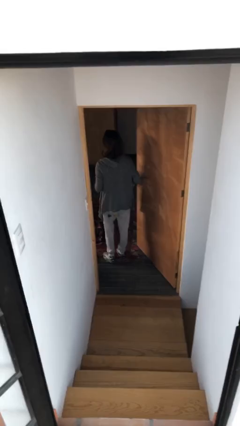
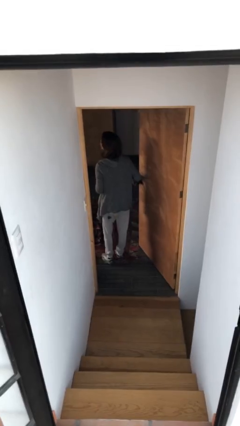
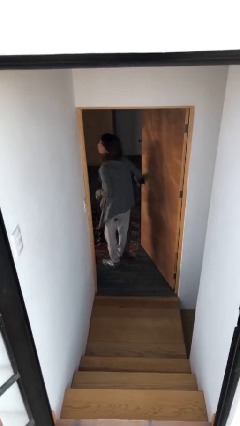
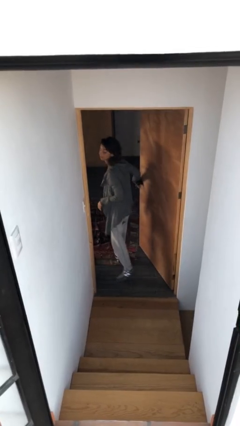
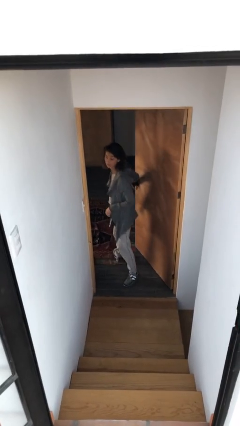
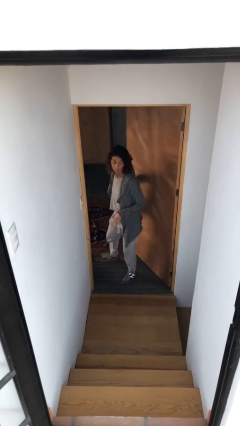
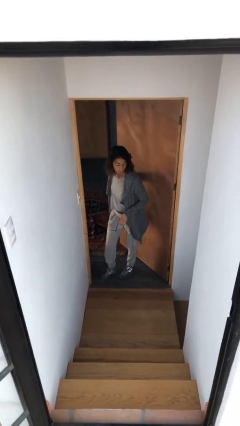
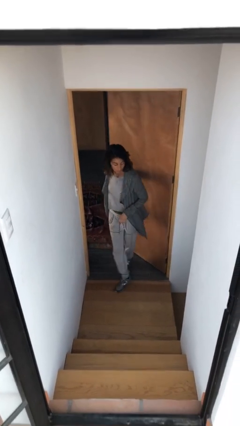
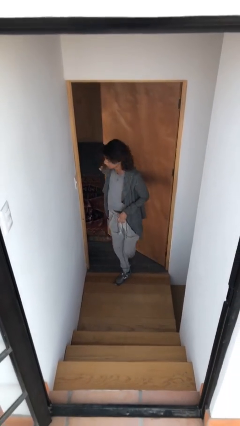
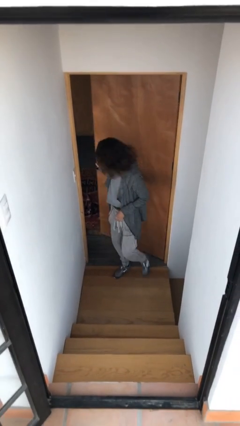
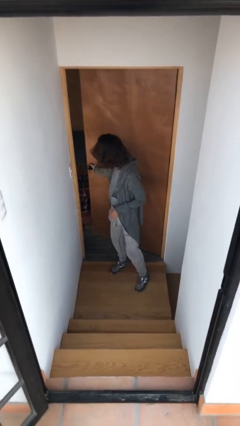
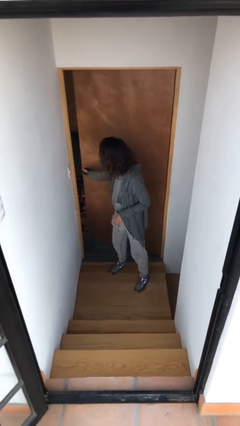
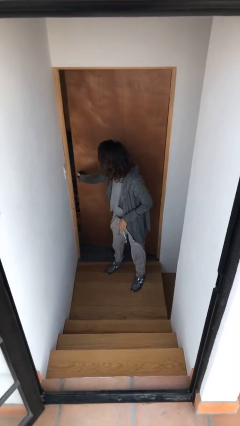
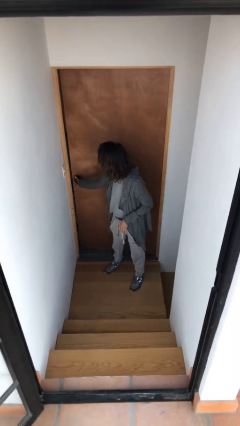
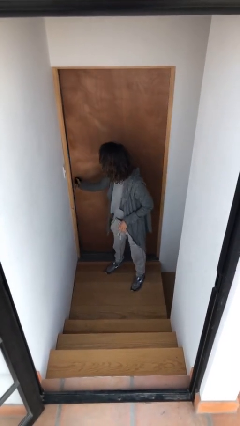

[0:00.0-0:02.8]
person closes facility door

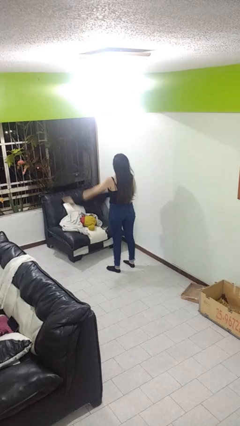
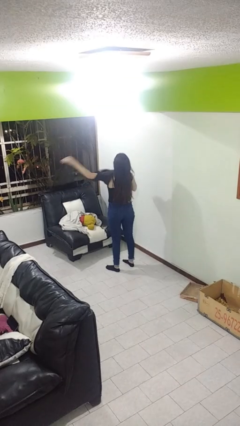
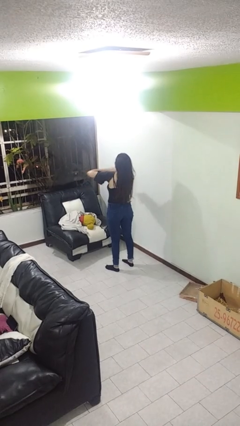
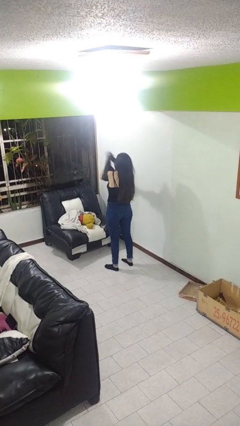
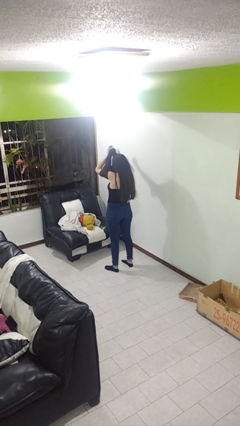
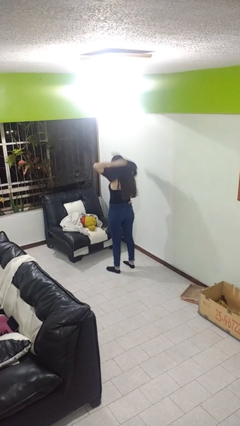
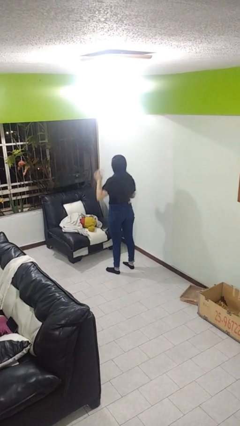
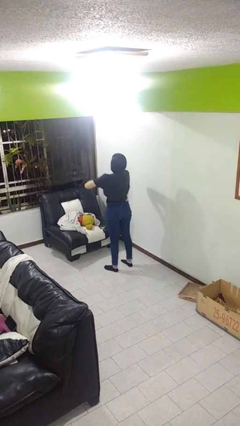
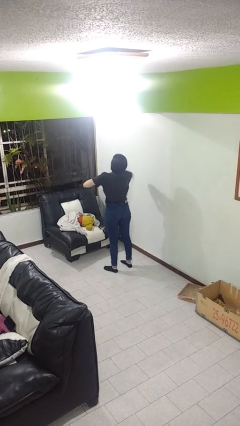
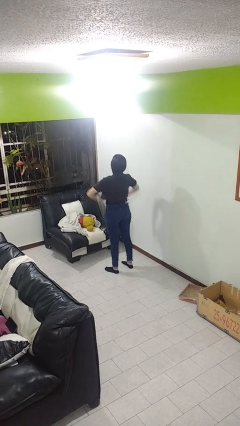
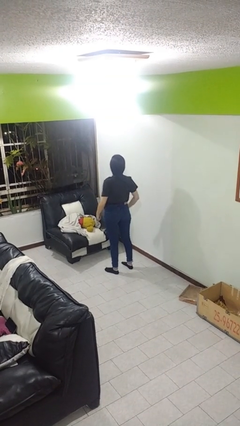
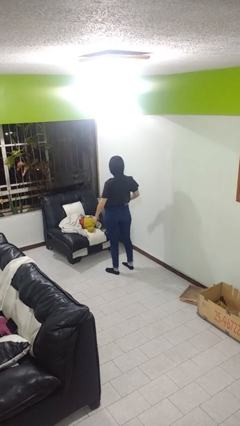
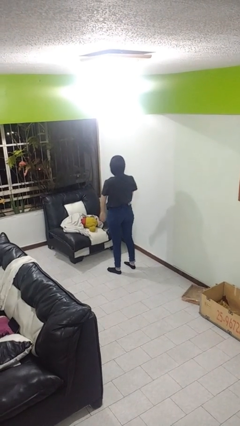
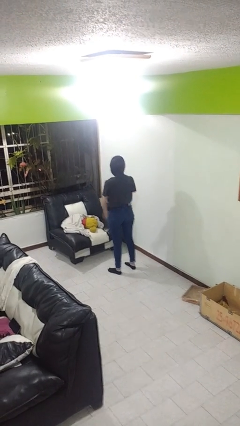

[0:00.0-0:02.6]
person puts on shirt

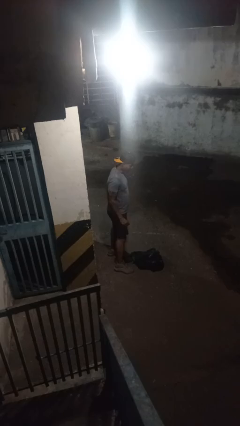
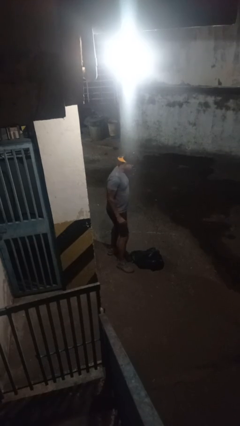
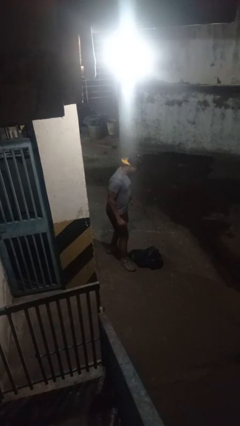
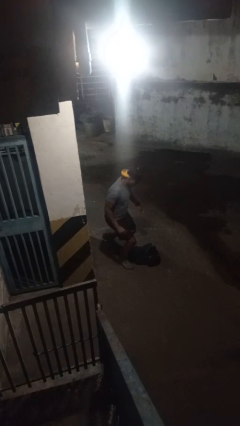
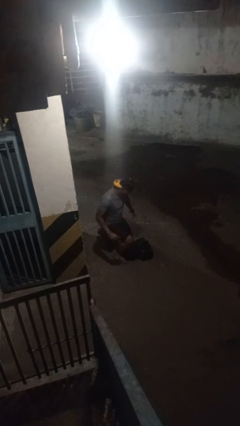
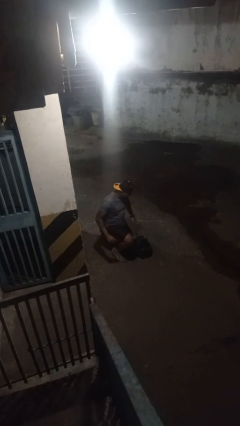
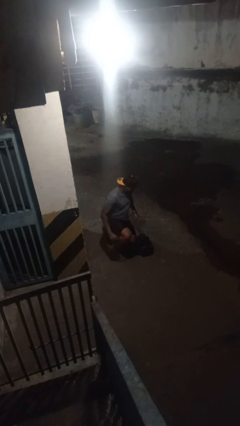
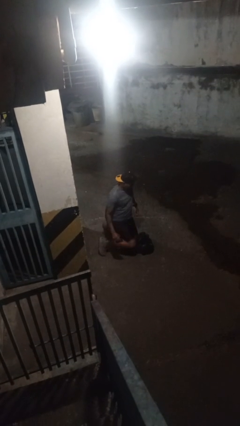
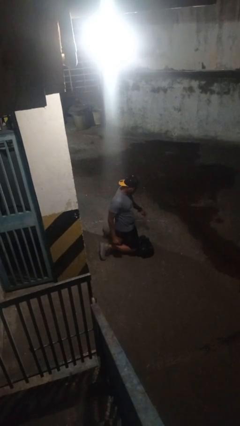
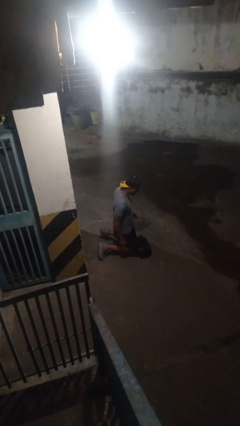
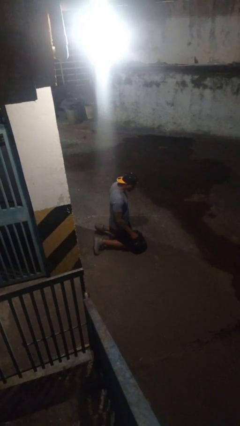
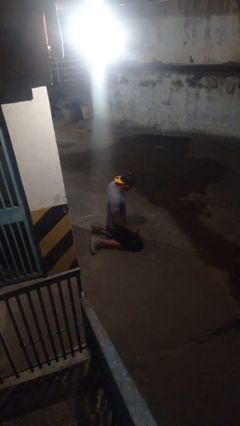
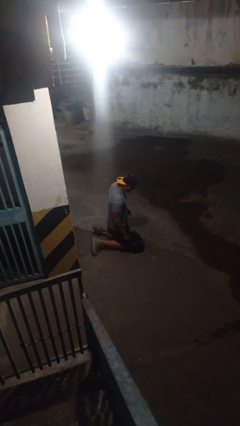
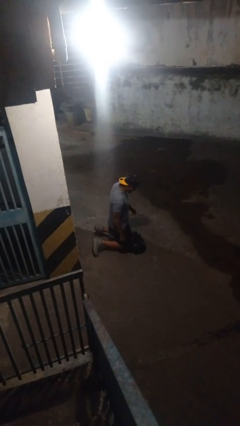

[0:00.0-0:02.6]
person kneels

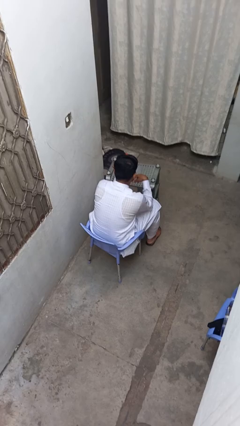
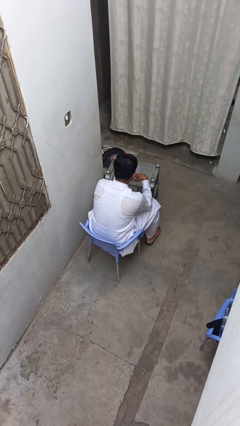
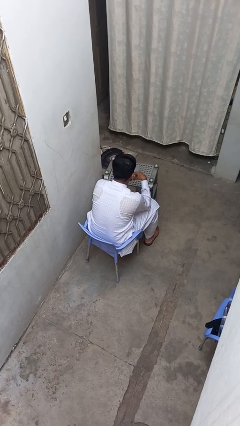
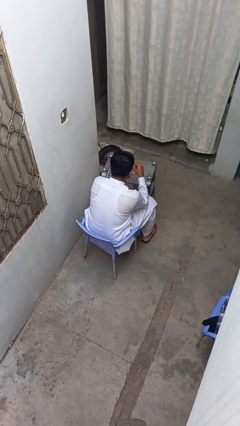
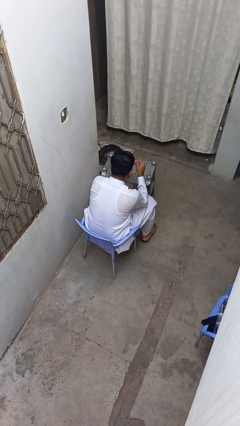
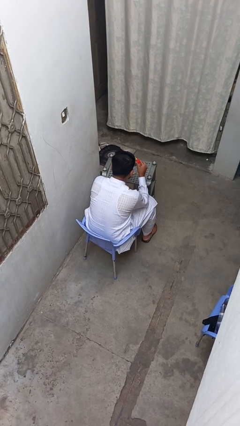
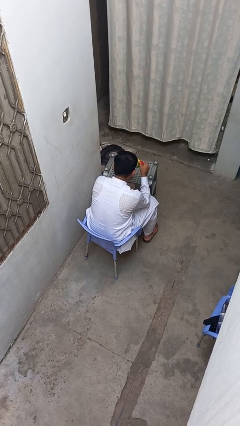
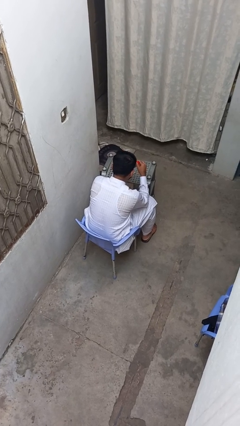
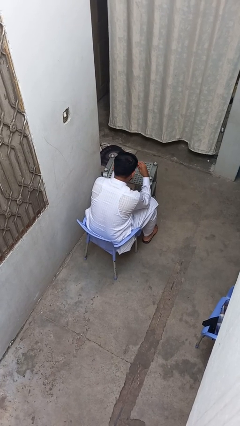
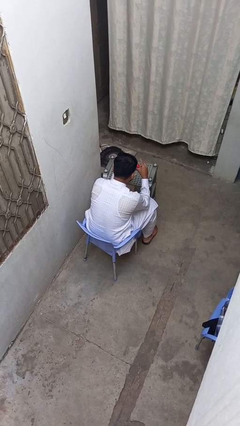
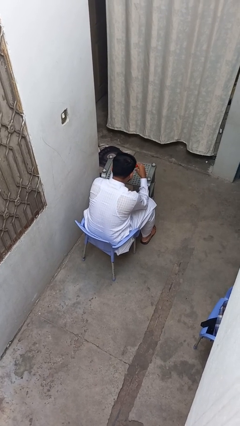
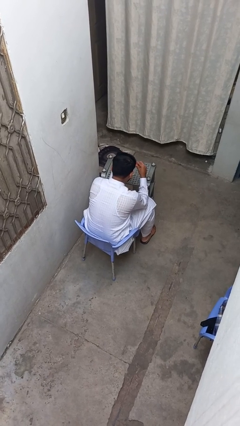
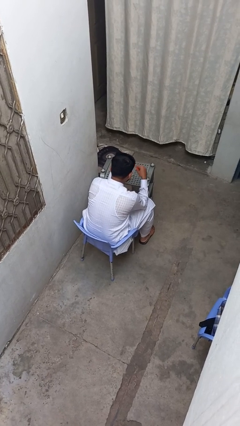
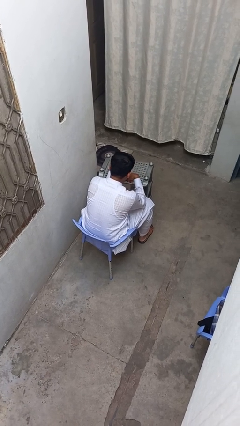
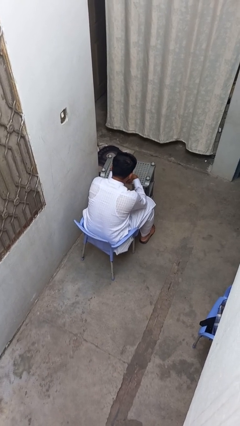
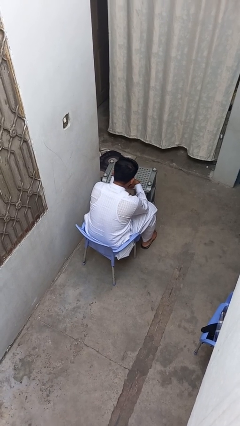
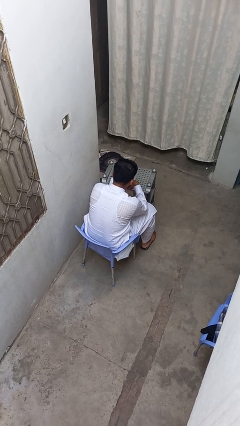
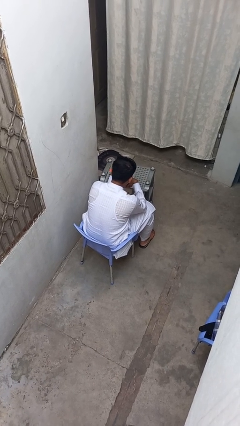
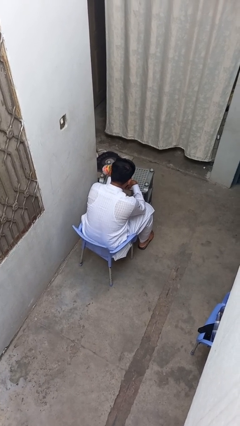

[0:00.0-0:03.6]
person unscrews lid from bottle

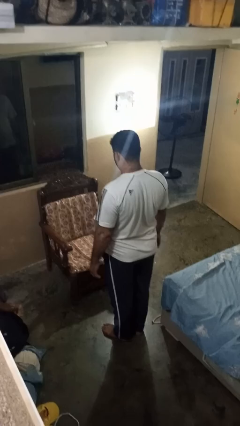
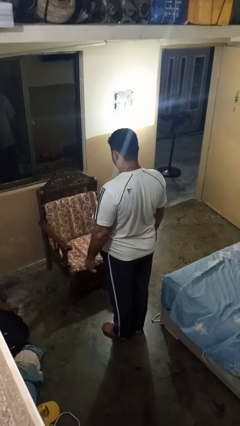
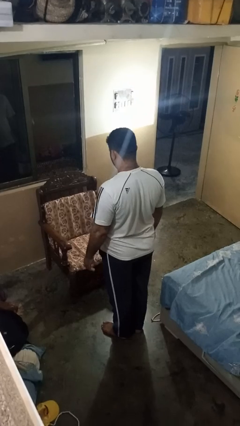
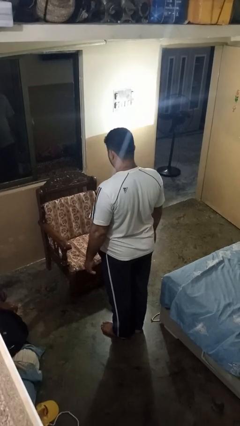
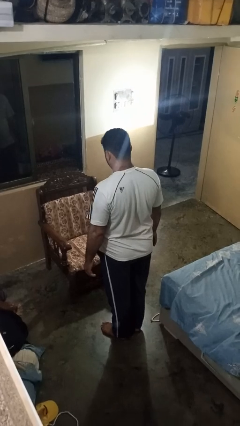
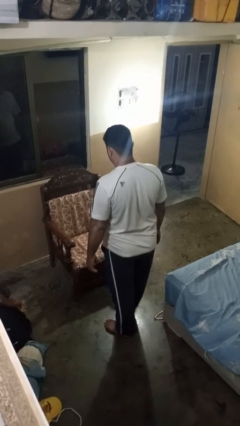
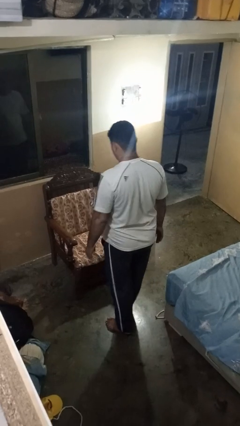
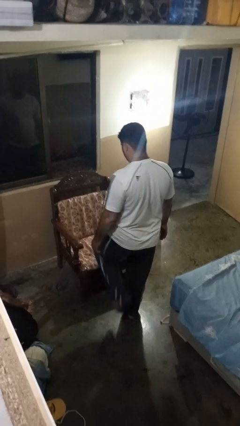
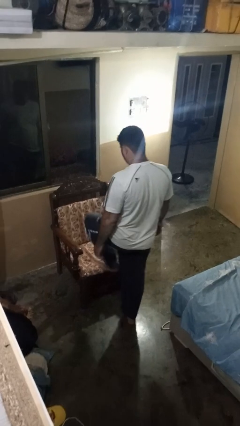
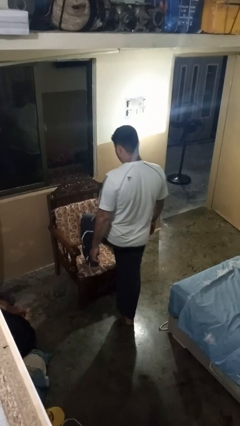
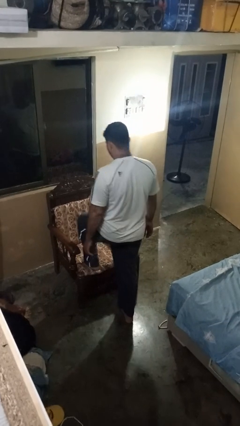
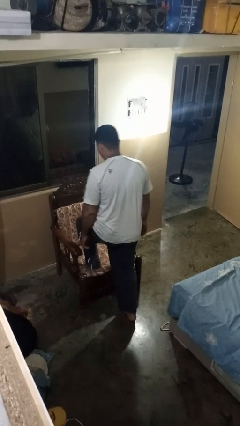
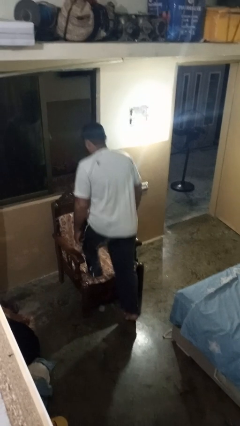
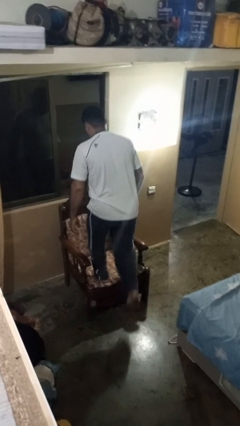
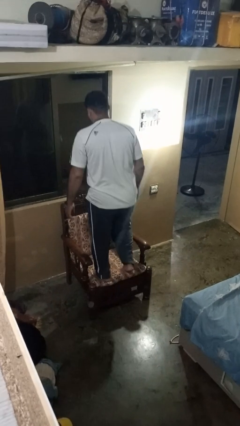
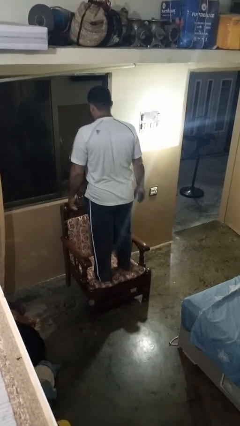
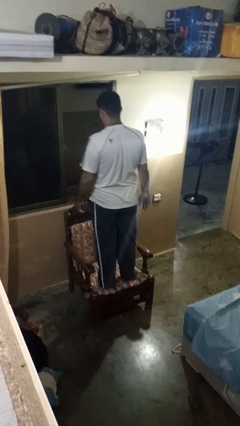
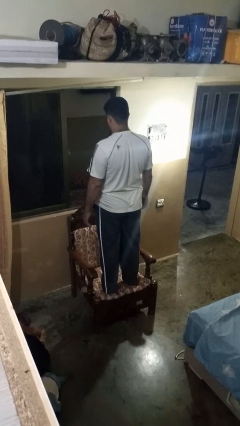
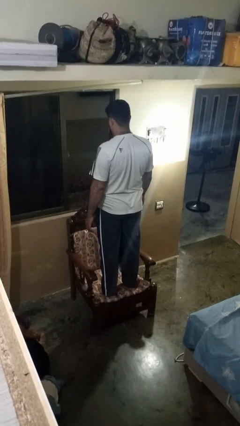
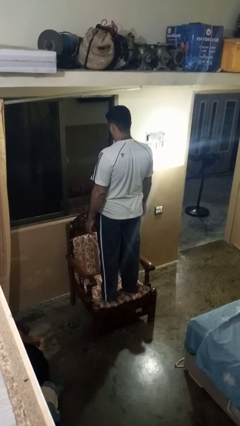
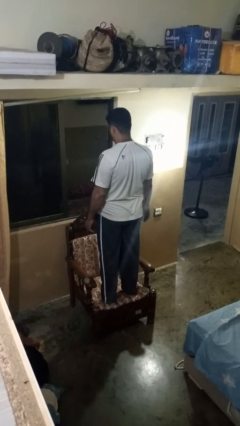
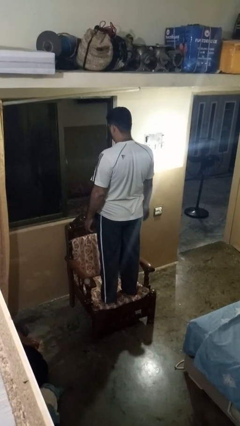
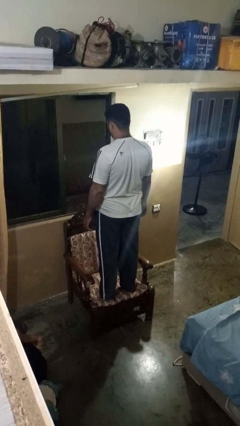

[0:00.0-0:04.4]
person climbs on chair

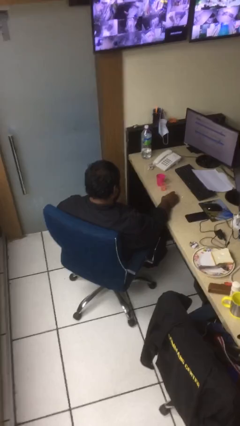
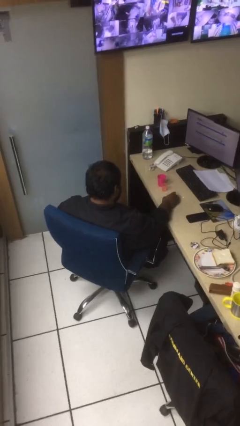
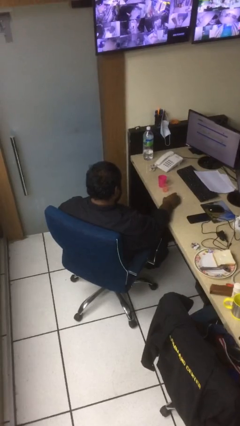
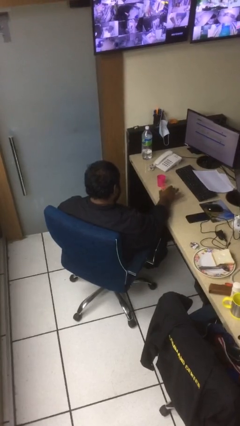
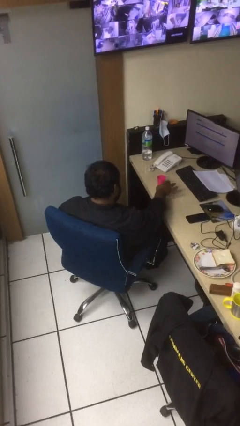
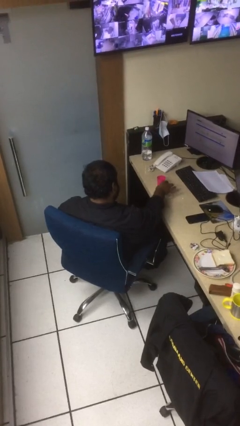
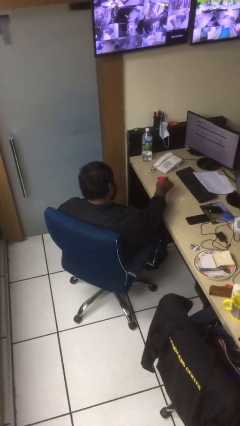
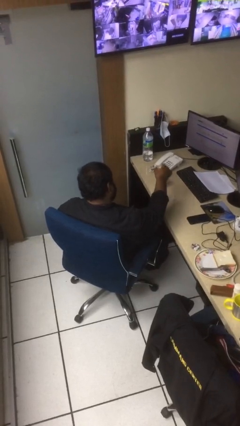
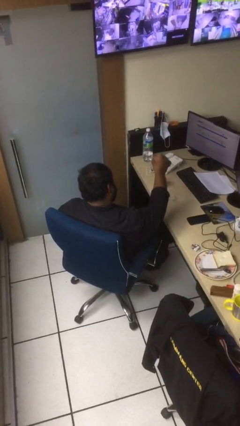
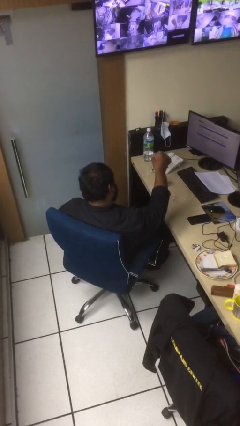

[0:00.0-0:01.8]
person picks up object from table
